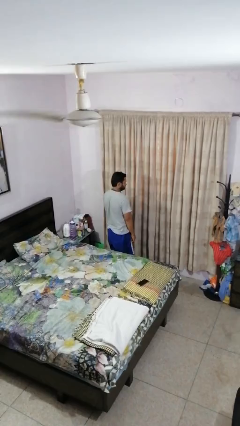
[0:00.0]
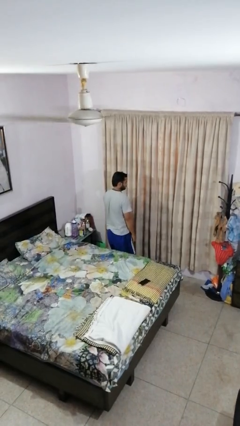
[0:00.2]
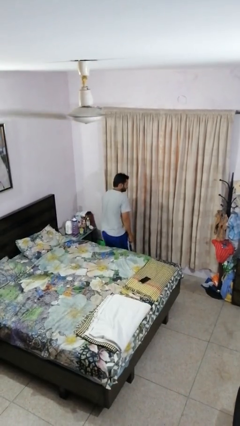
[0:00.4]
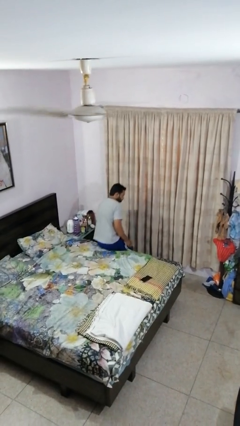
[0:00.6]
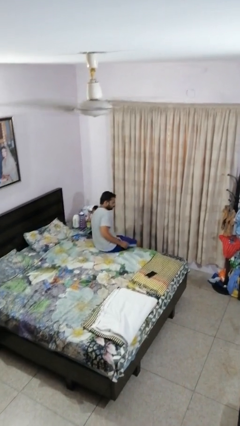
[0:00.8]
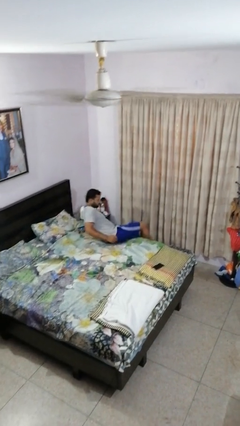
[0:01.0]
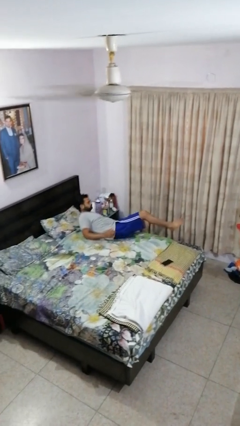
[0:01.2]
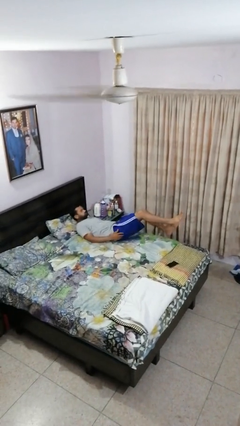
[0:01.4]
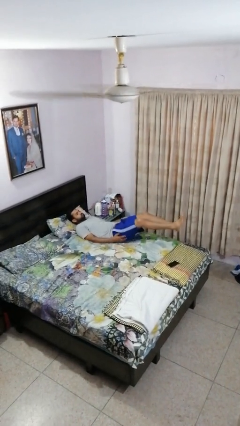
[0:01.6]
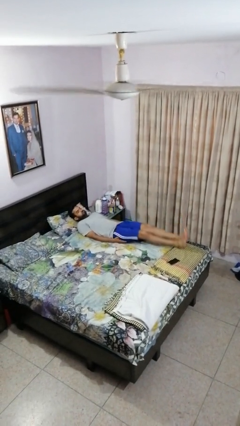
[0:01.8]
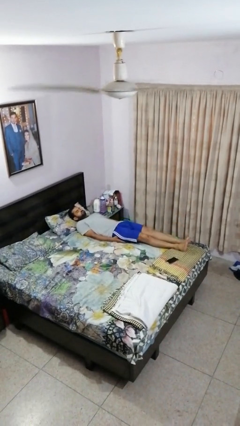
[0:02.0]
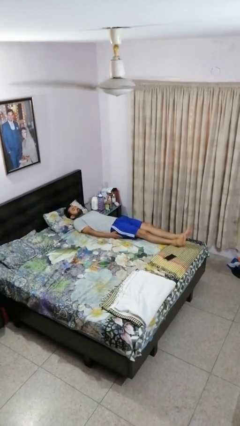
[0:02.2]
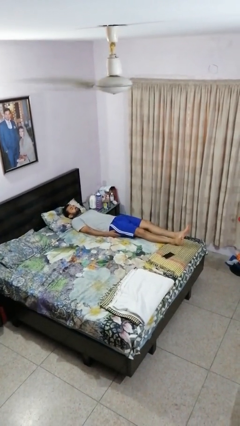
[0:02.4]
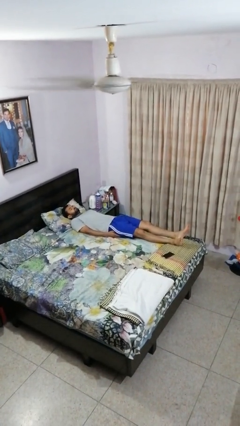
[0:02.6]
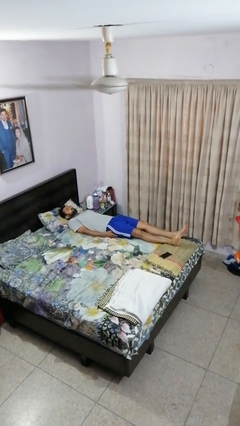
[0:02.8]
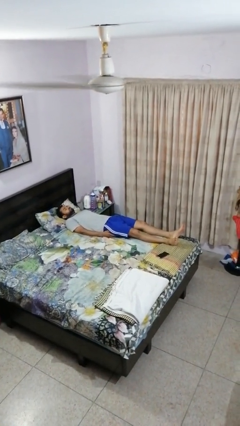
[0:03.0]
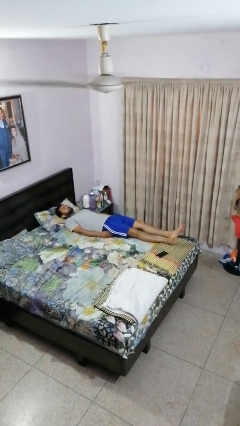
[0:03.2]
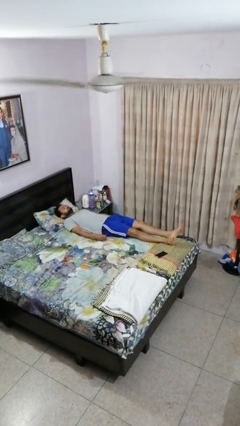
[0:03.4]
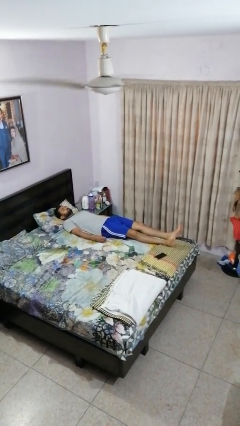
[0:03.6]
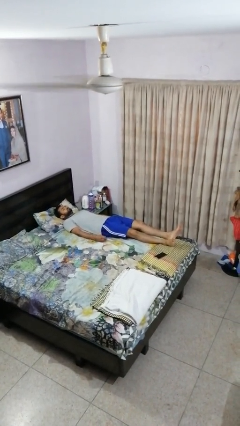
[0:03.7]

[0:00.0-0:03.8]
person lies down on bed

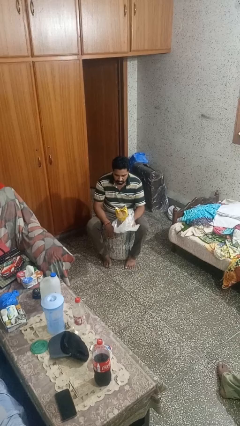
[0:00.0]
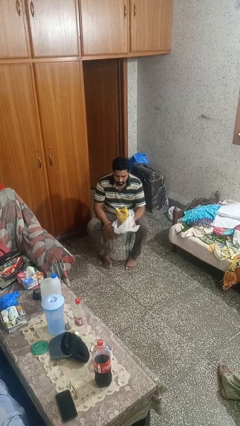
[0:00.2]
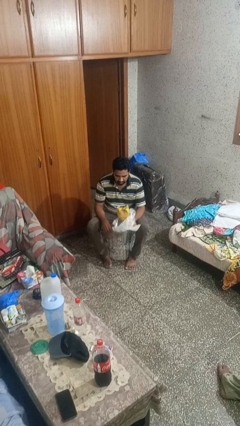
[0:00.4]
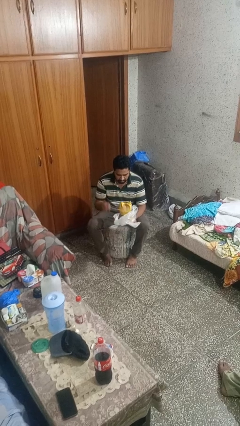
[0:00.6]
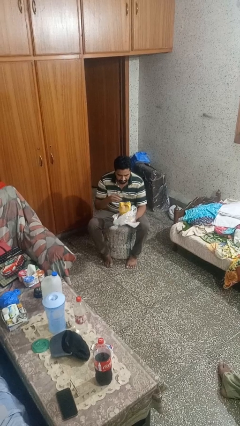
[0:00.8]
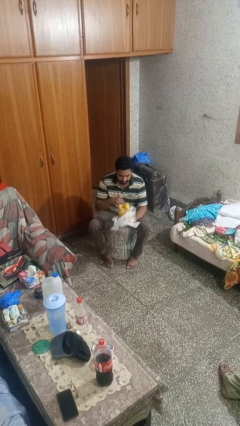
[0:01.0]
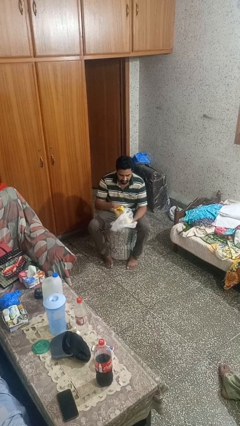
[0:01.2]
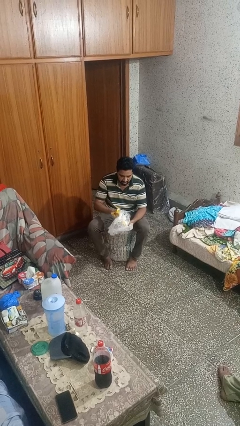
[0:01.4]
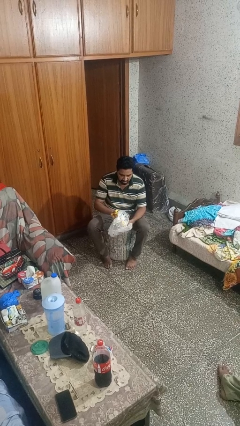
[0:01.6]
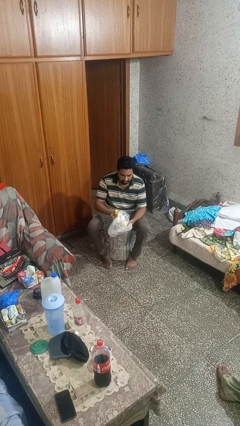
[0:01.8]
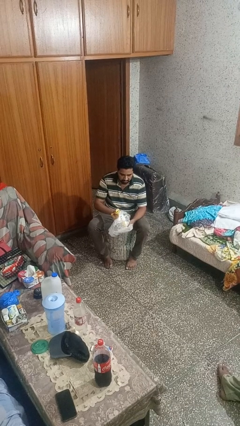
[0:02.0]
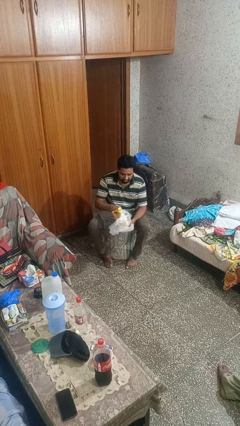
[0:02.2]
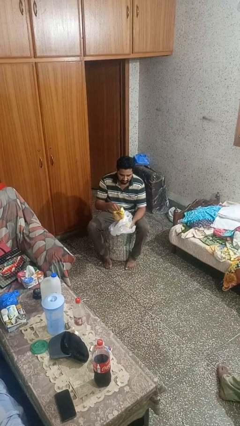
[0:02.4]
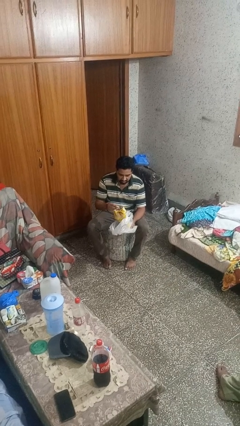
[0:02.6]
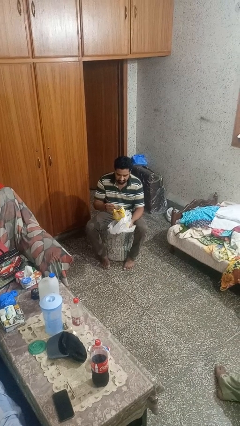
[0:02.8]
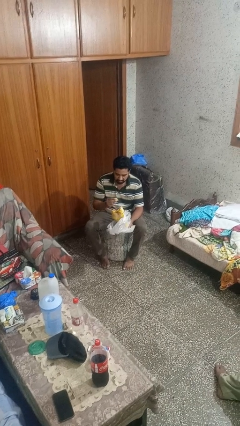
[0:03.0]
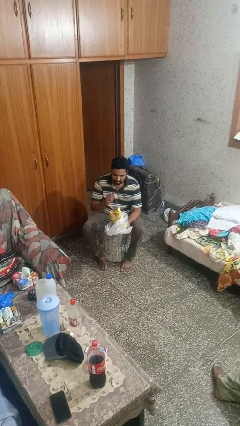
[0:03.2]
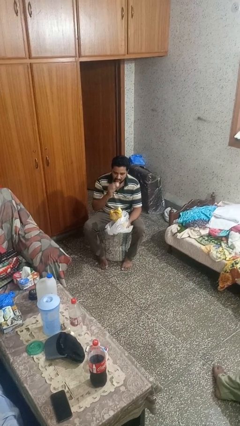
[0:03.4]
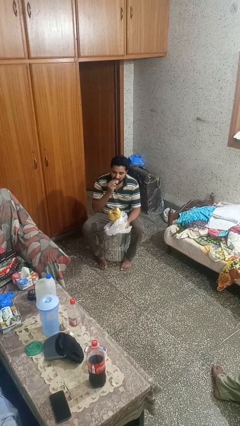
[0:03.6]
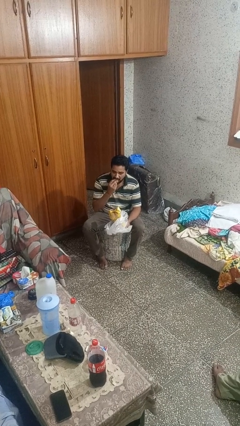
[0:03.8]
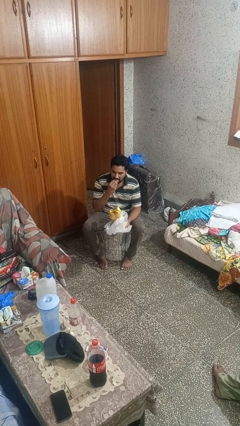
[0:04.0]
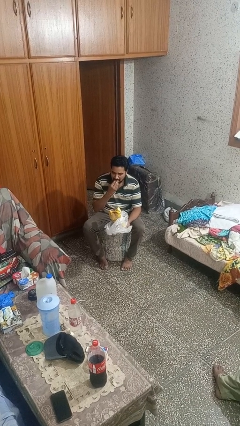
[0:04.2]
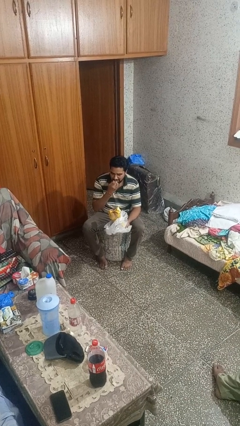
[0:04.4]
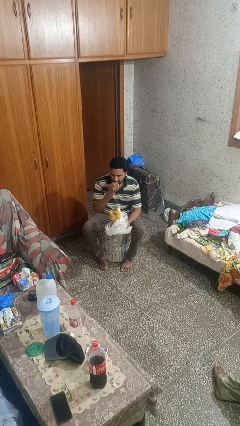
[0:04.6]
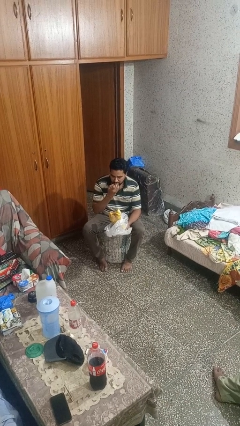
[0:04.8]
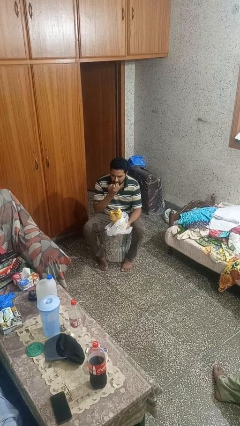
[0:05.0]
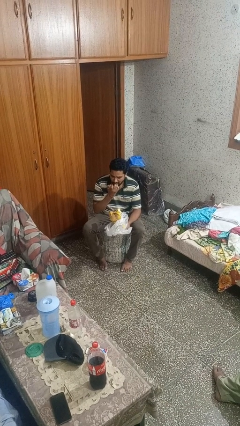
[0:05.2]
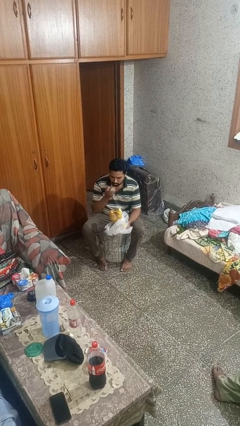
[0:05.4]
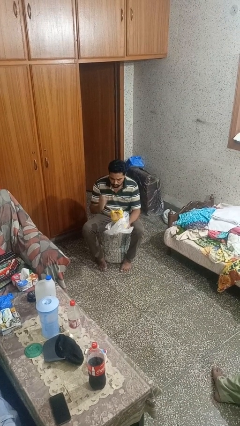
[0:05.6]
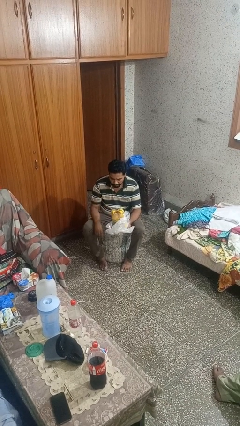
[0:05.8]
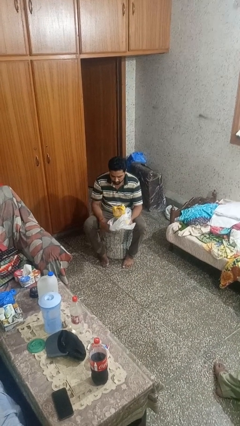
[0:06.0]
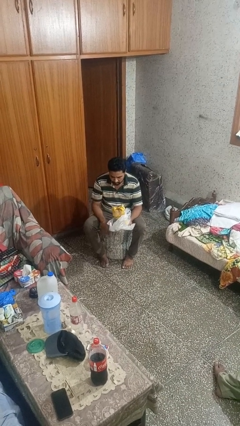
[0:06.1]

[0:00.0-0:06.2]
person eats snack from bag

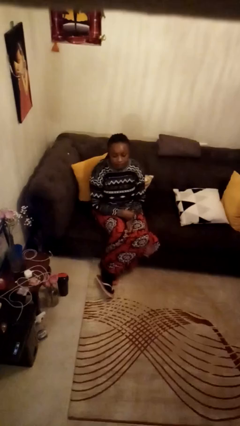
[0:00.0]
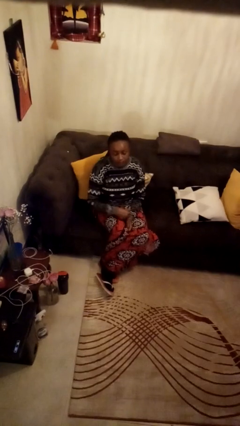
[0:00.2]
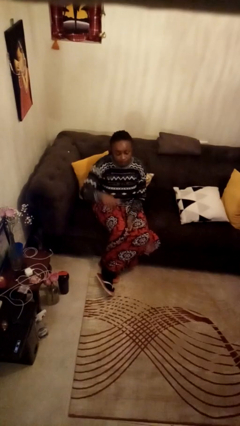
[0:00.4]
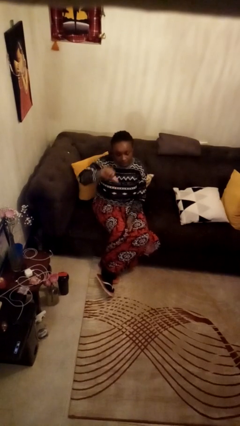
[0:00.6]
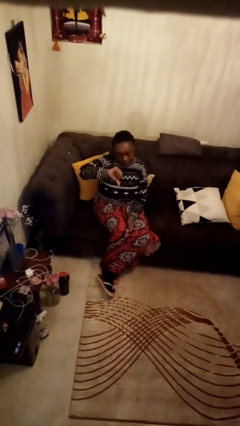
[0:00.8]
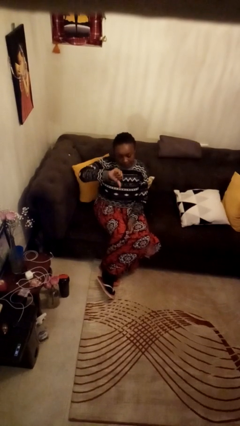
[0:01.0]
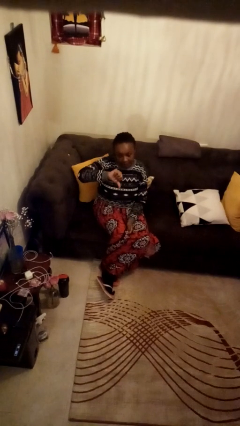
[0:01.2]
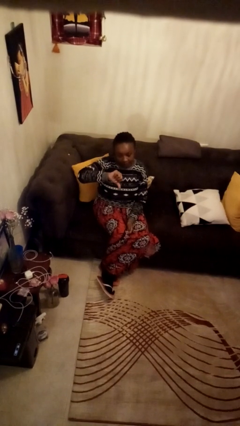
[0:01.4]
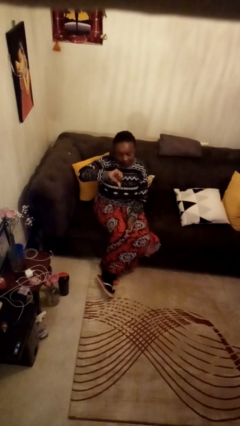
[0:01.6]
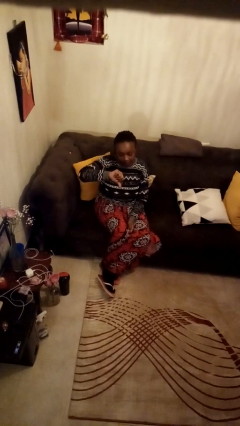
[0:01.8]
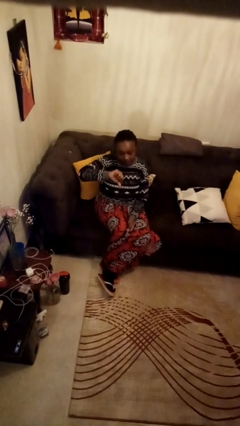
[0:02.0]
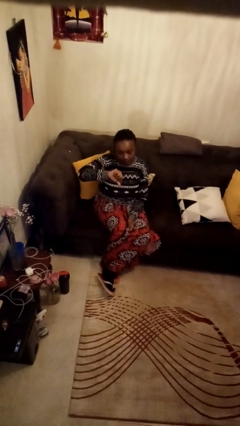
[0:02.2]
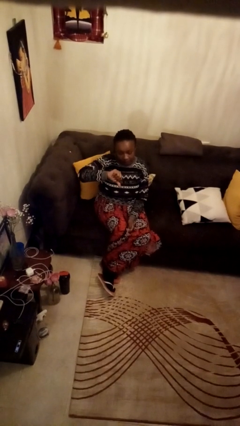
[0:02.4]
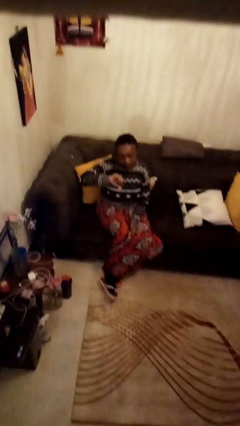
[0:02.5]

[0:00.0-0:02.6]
person gestures thumbs down

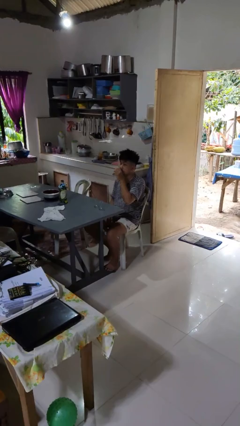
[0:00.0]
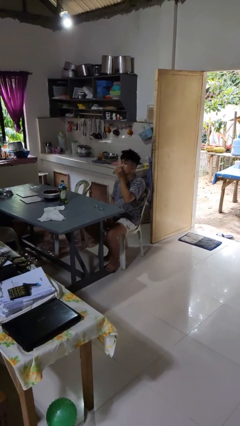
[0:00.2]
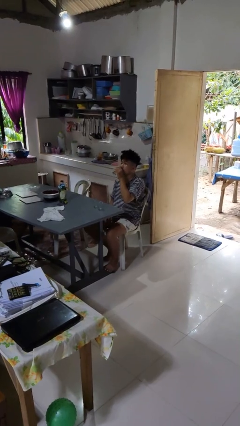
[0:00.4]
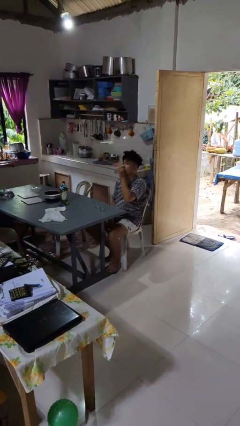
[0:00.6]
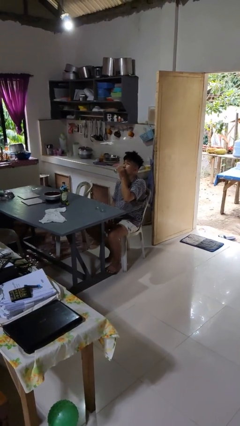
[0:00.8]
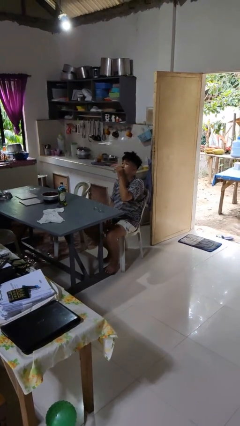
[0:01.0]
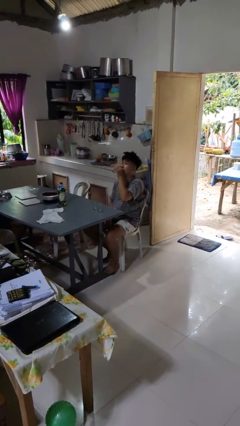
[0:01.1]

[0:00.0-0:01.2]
person drinks from shotglass

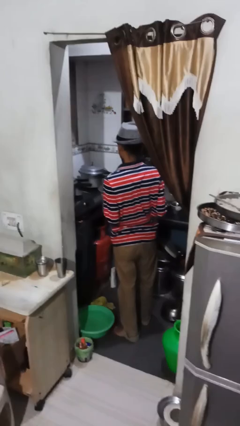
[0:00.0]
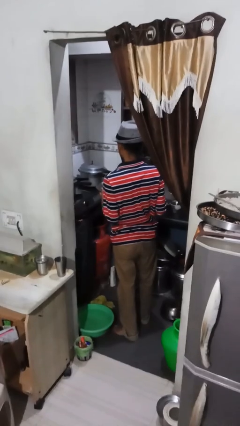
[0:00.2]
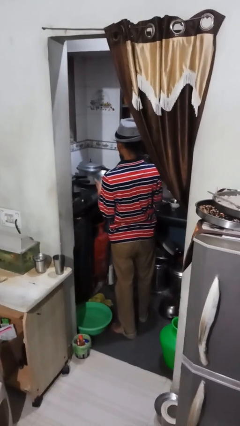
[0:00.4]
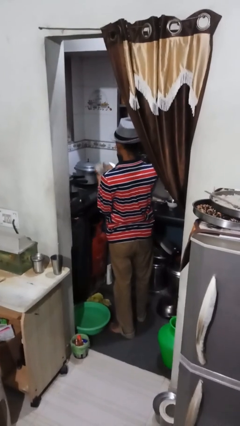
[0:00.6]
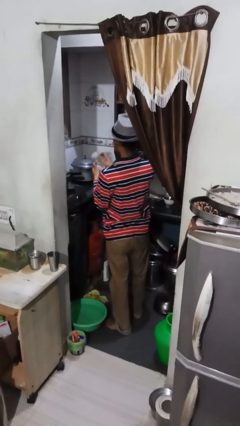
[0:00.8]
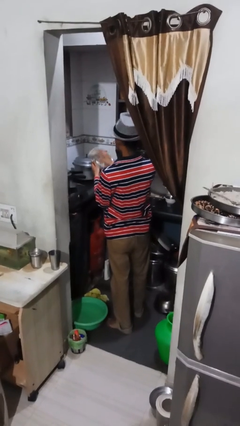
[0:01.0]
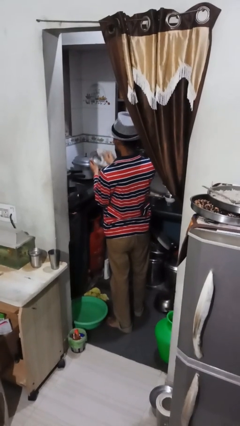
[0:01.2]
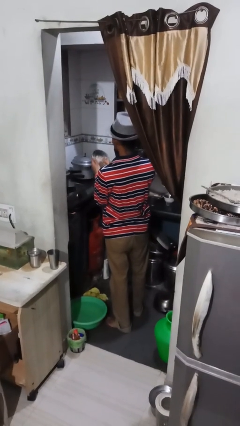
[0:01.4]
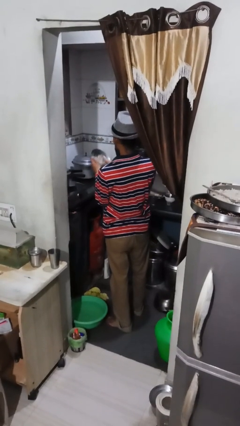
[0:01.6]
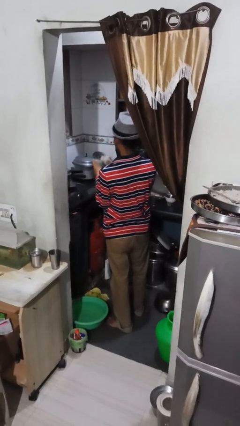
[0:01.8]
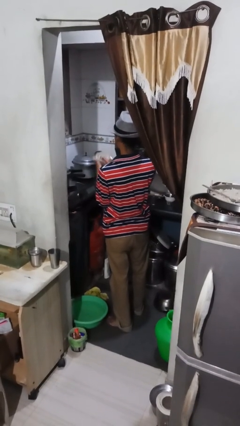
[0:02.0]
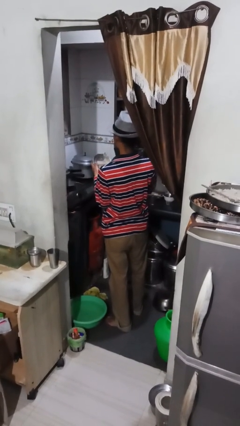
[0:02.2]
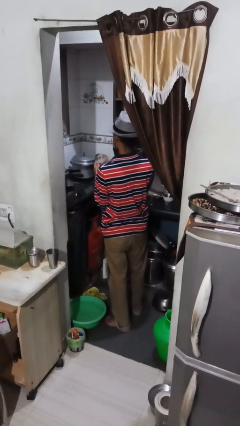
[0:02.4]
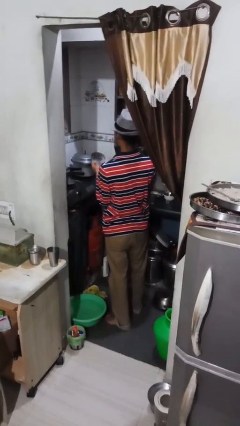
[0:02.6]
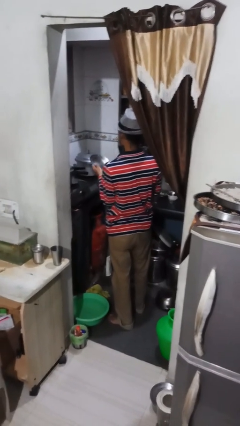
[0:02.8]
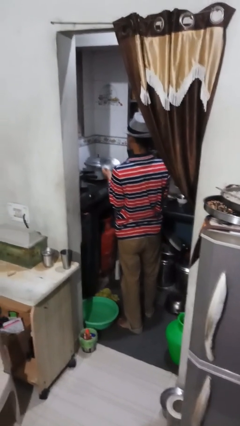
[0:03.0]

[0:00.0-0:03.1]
person dries dish

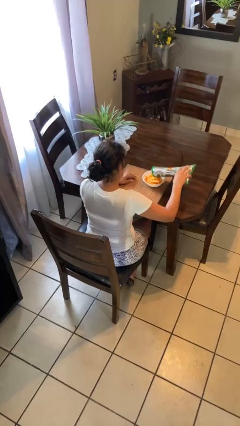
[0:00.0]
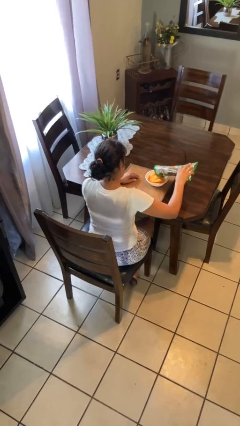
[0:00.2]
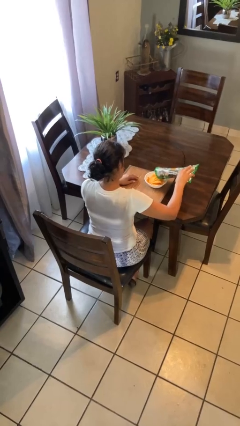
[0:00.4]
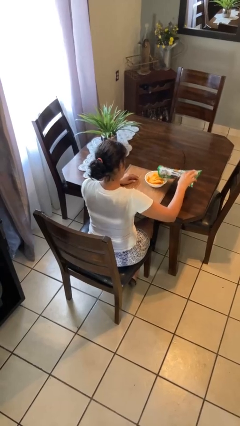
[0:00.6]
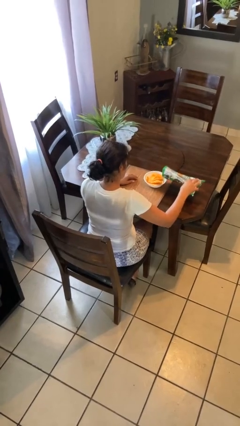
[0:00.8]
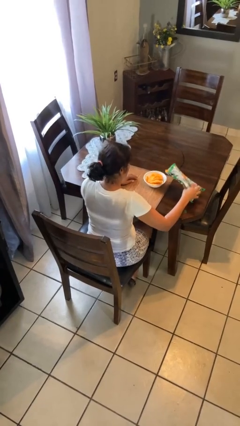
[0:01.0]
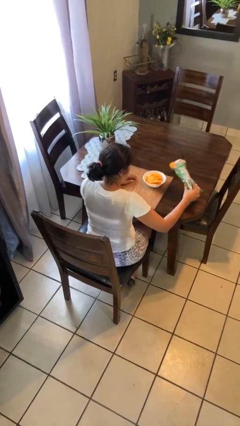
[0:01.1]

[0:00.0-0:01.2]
person pours into bowl
